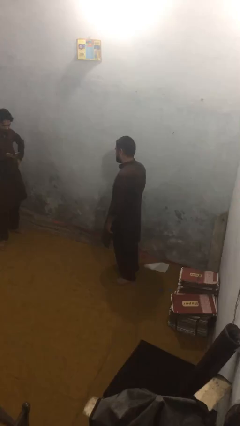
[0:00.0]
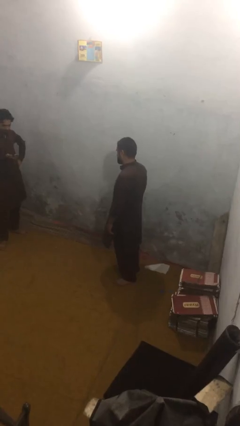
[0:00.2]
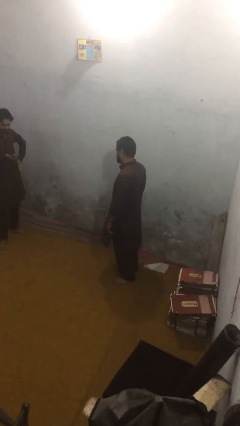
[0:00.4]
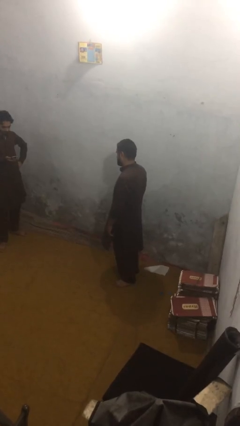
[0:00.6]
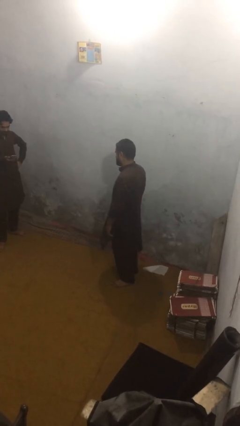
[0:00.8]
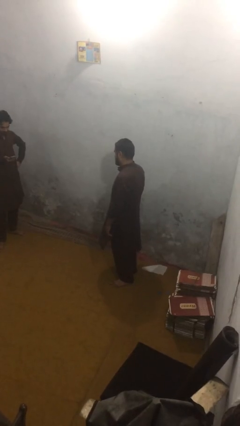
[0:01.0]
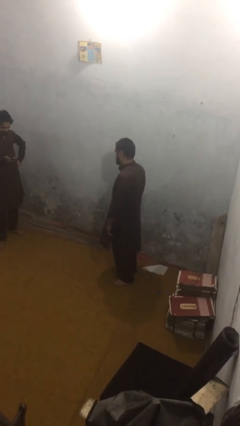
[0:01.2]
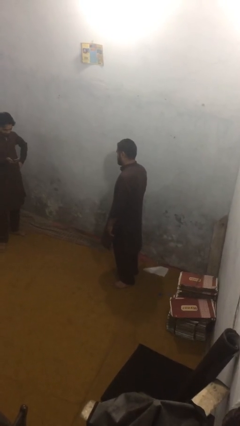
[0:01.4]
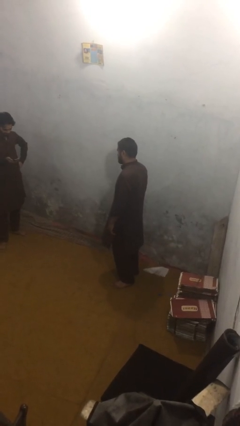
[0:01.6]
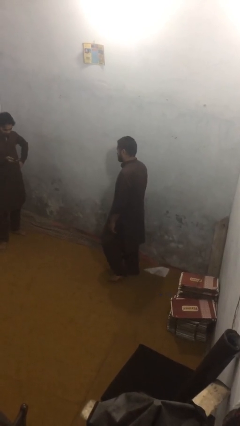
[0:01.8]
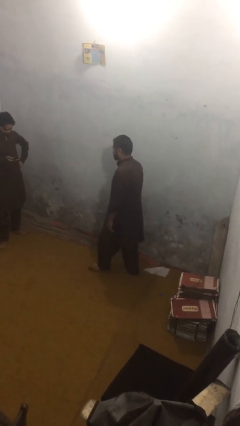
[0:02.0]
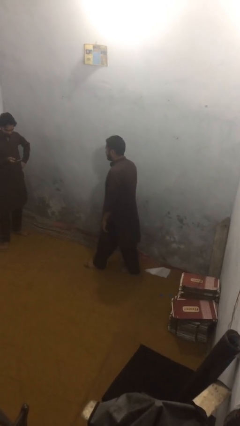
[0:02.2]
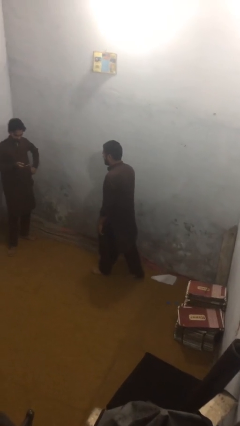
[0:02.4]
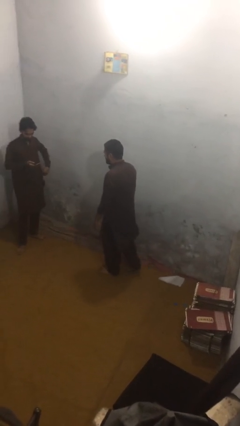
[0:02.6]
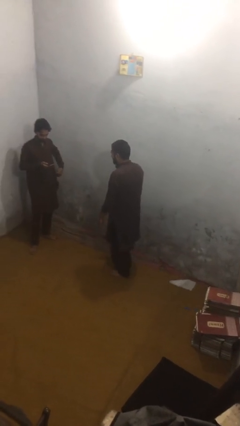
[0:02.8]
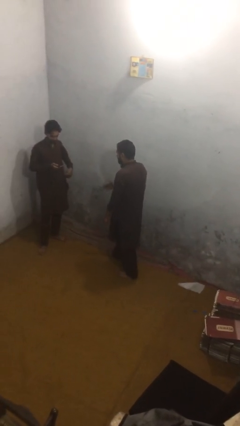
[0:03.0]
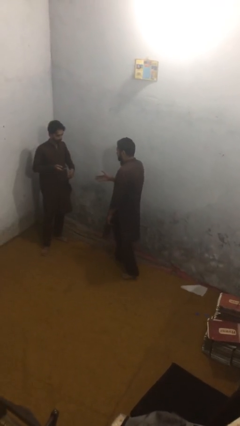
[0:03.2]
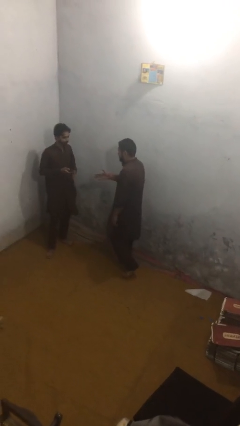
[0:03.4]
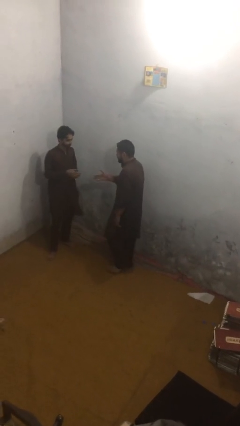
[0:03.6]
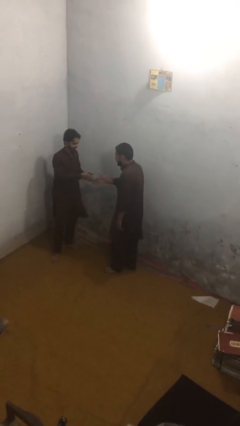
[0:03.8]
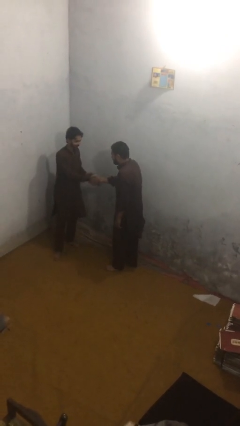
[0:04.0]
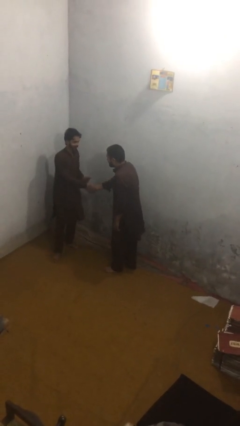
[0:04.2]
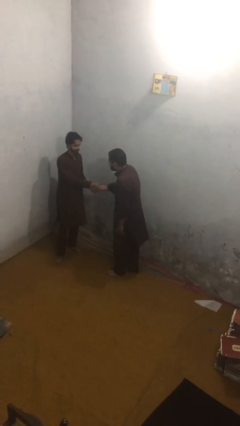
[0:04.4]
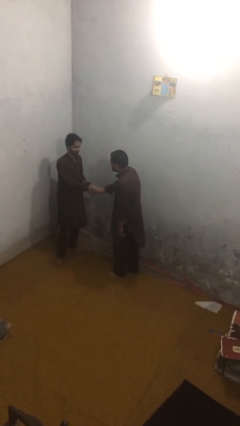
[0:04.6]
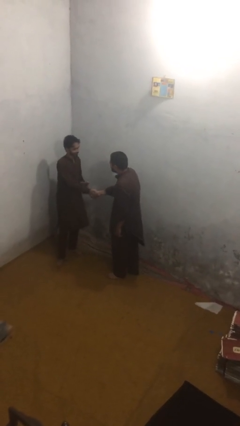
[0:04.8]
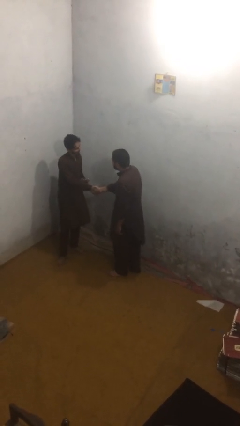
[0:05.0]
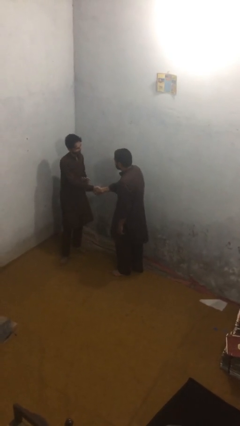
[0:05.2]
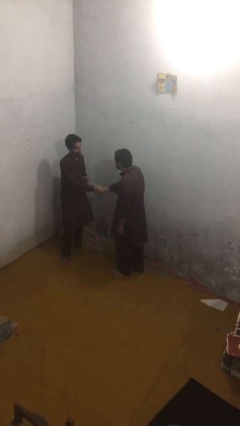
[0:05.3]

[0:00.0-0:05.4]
person shakes hand

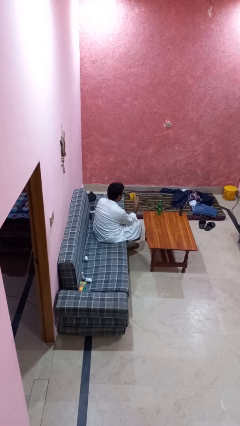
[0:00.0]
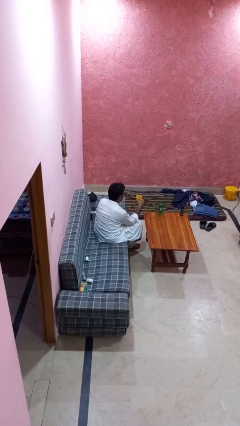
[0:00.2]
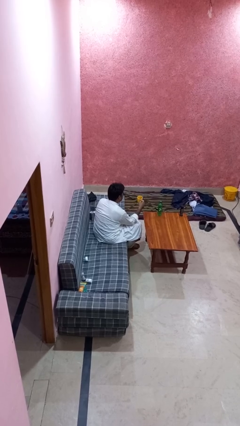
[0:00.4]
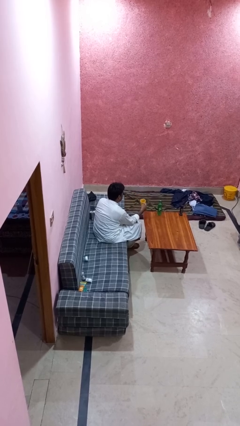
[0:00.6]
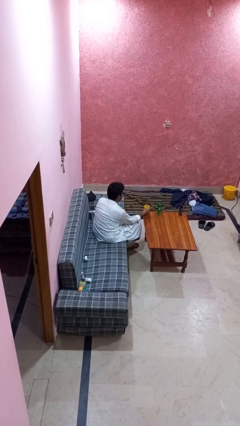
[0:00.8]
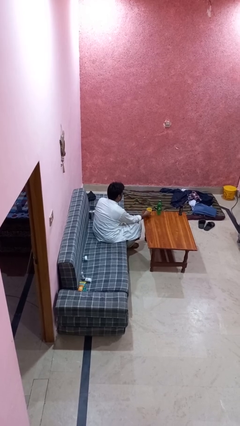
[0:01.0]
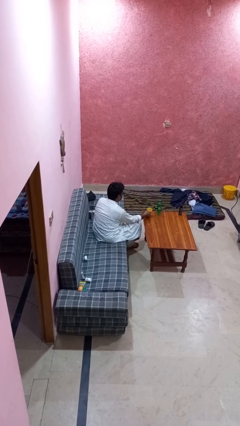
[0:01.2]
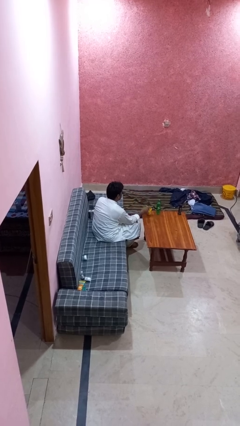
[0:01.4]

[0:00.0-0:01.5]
person puts down object on table

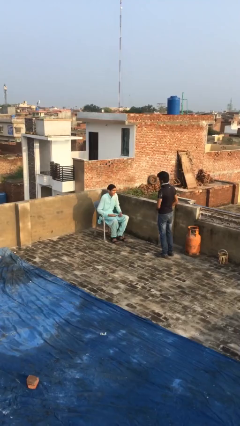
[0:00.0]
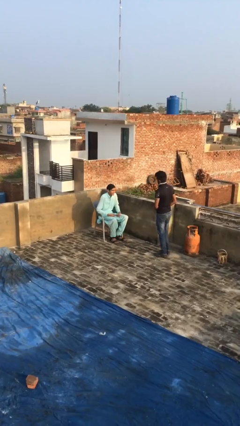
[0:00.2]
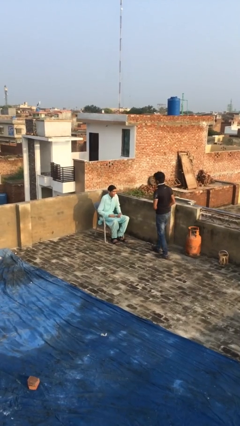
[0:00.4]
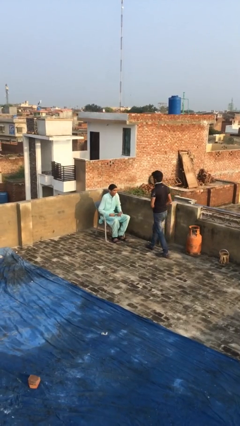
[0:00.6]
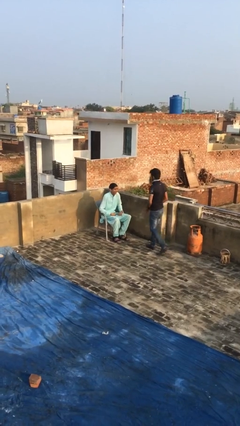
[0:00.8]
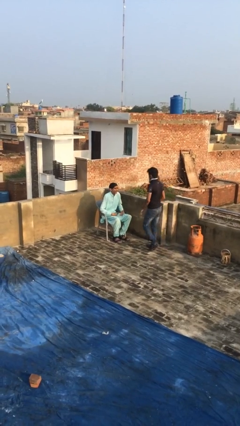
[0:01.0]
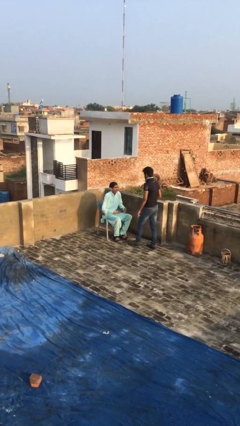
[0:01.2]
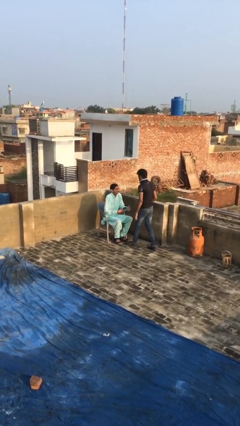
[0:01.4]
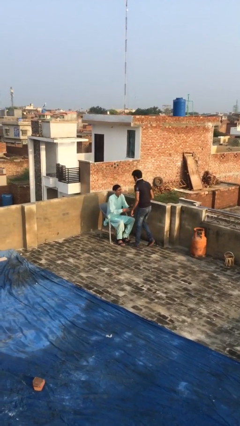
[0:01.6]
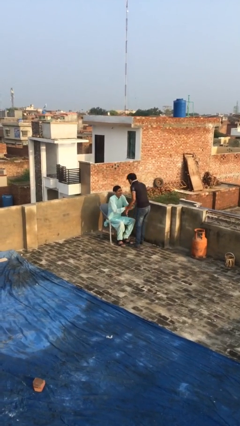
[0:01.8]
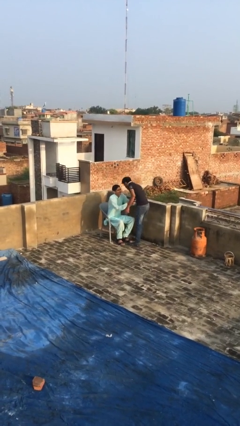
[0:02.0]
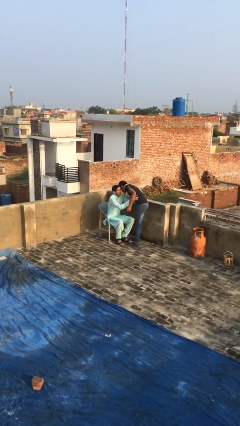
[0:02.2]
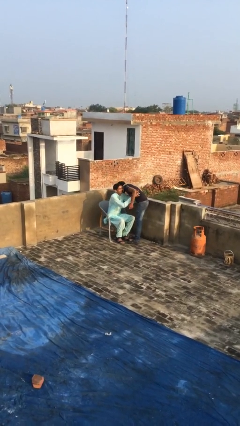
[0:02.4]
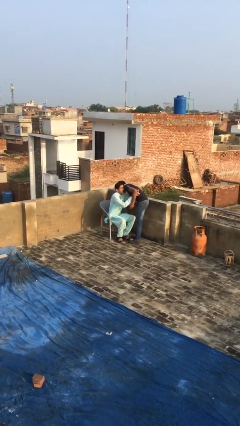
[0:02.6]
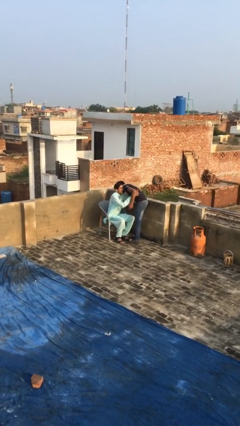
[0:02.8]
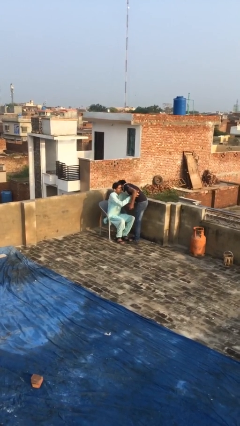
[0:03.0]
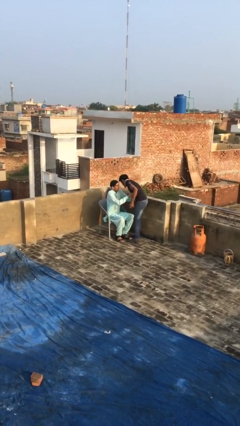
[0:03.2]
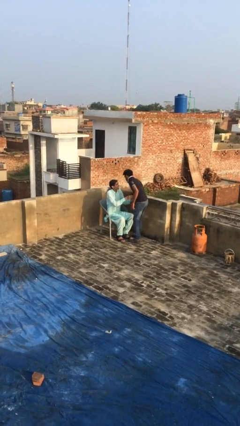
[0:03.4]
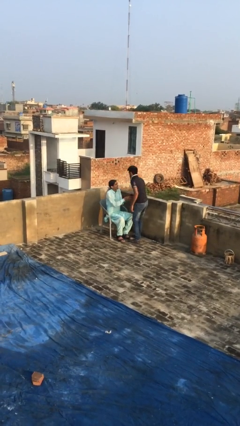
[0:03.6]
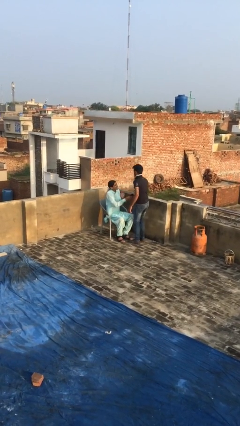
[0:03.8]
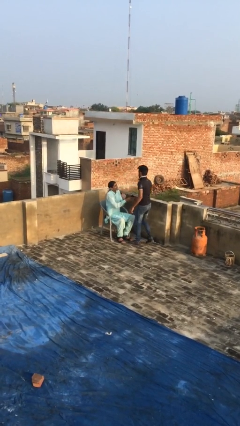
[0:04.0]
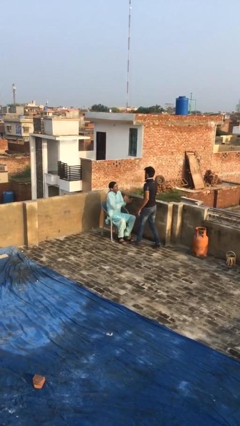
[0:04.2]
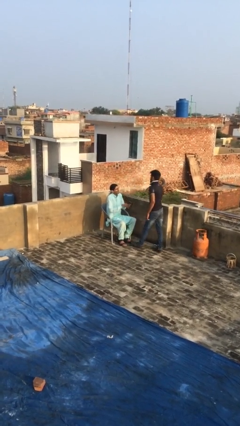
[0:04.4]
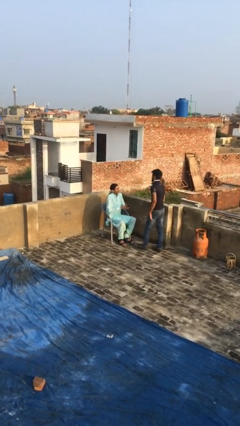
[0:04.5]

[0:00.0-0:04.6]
person embraces person

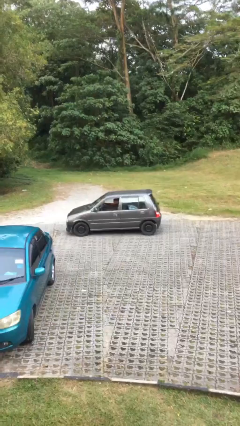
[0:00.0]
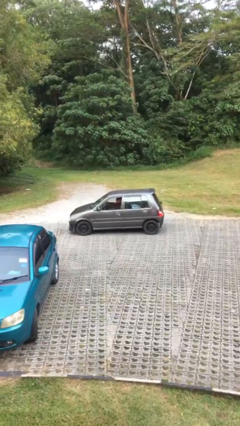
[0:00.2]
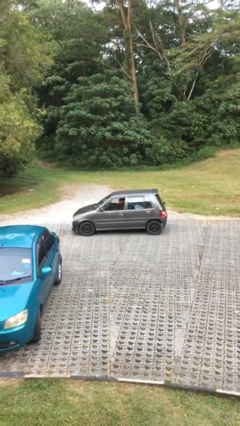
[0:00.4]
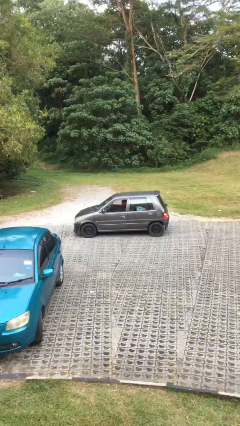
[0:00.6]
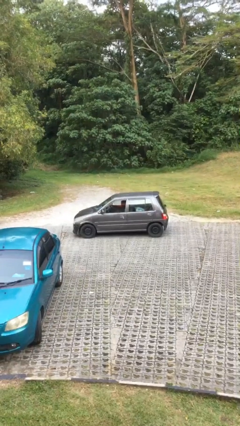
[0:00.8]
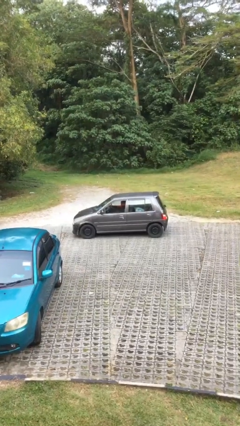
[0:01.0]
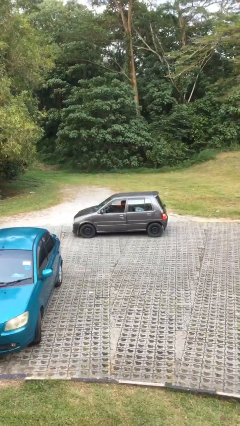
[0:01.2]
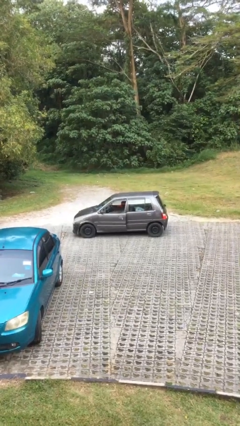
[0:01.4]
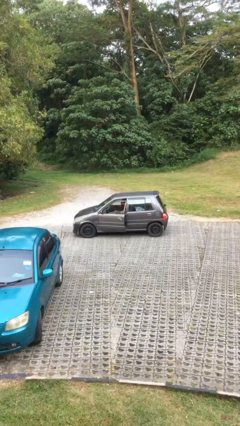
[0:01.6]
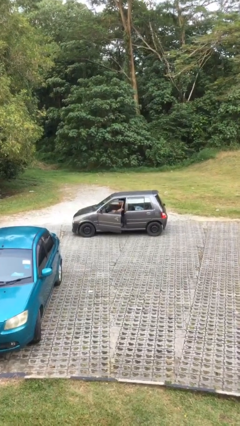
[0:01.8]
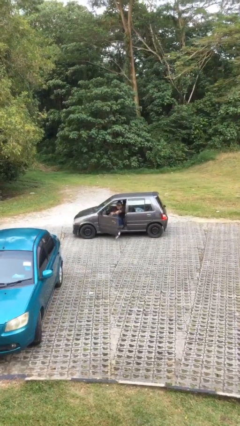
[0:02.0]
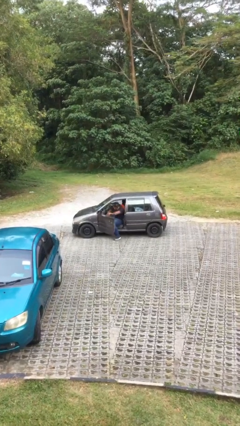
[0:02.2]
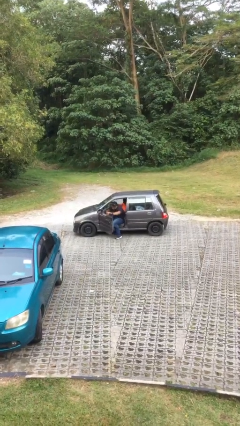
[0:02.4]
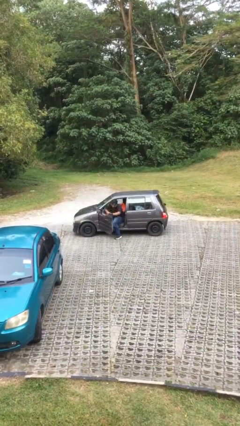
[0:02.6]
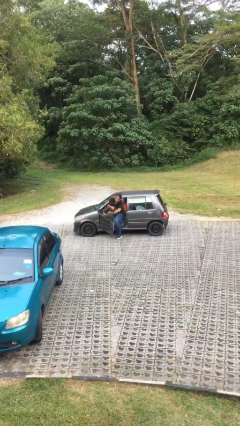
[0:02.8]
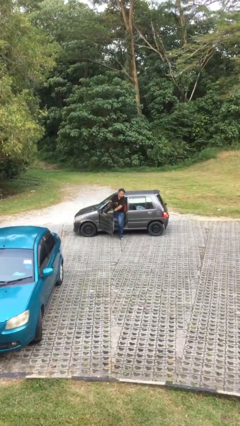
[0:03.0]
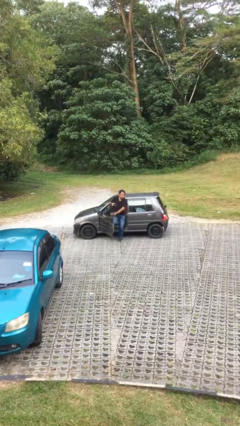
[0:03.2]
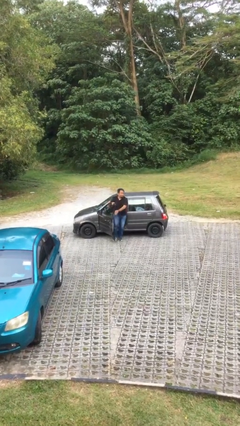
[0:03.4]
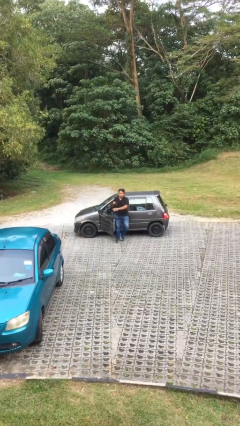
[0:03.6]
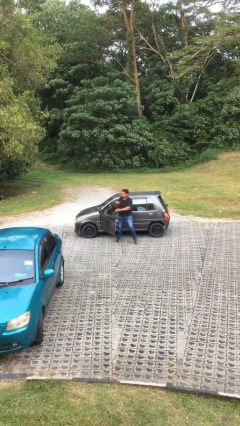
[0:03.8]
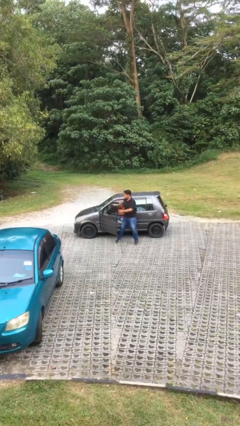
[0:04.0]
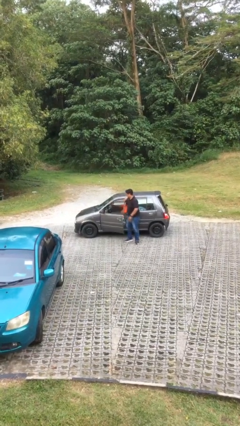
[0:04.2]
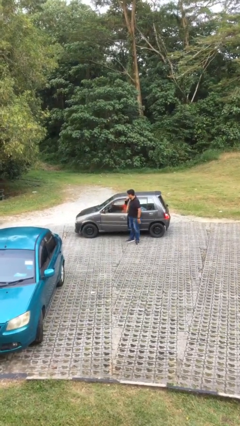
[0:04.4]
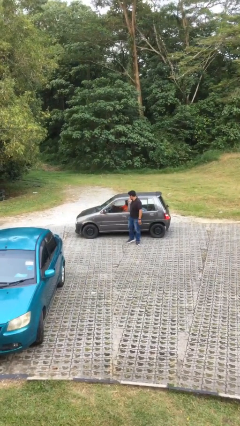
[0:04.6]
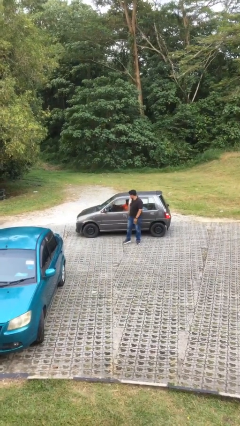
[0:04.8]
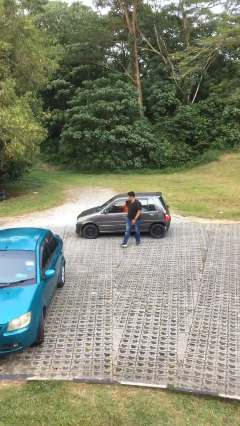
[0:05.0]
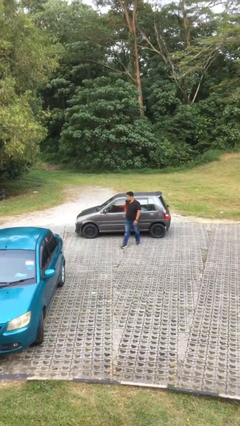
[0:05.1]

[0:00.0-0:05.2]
car drops off person

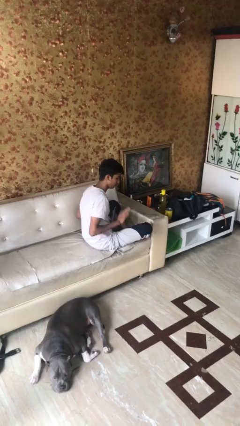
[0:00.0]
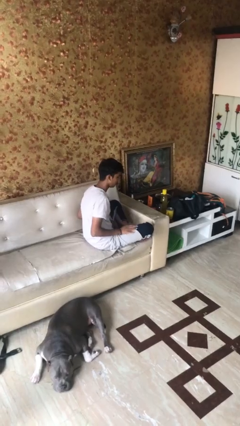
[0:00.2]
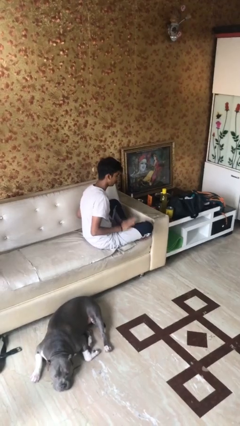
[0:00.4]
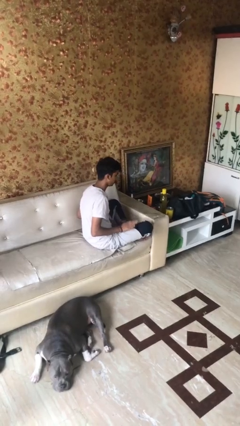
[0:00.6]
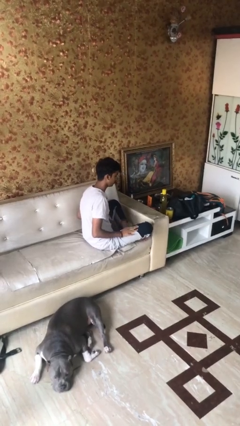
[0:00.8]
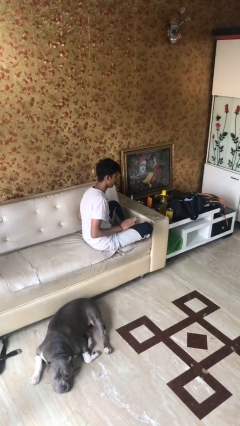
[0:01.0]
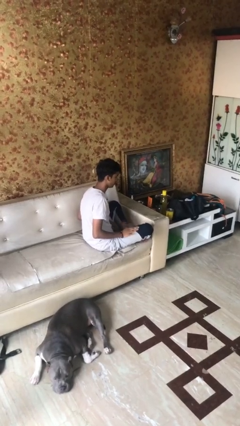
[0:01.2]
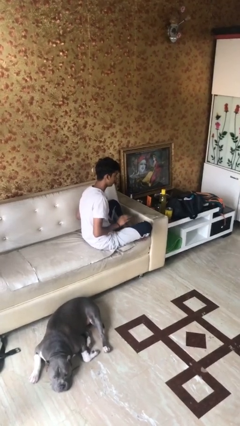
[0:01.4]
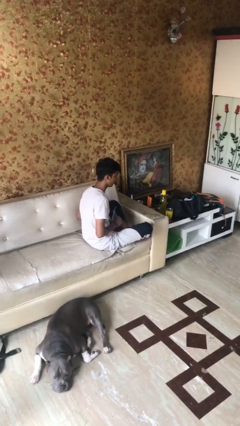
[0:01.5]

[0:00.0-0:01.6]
person slaps hands on thighs
